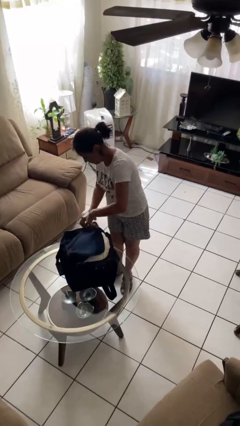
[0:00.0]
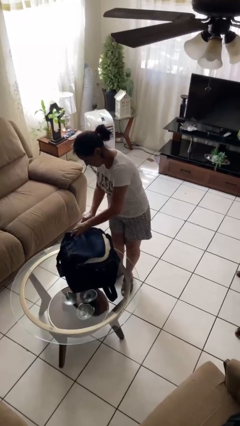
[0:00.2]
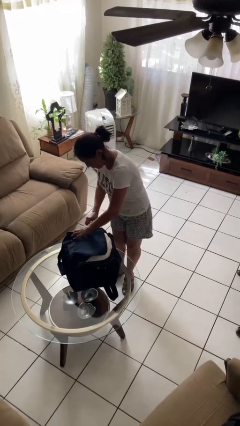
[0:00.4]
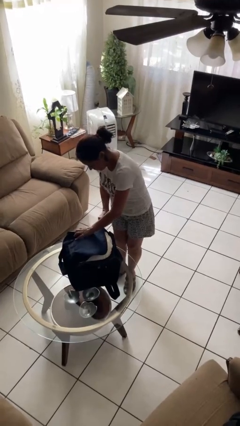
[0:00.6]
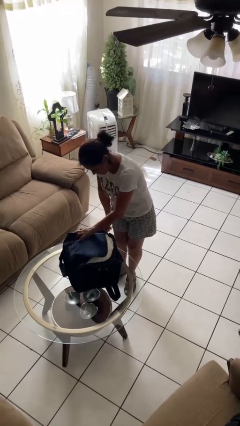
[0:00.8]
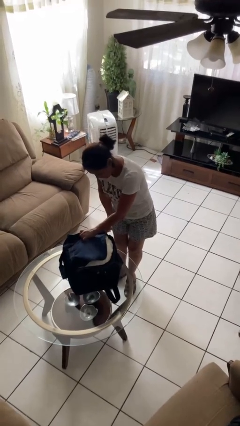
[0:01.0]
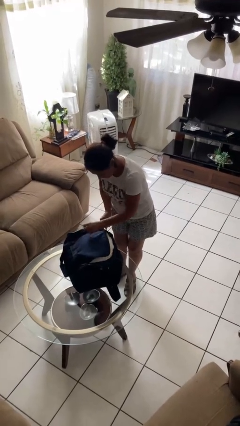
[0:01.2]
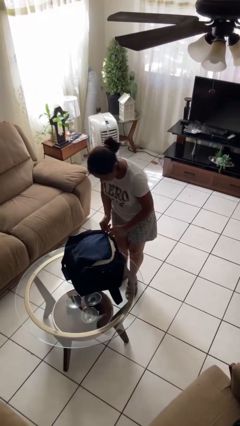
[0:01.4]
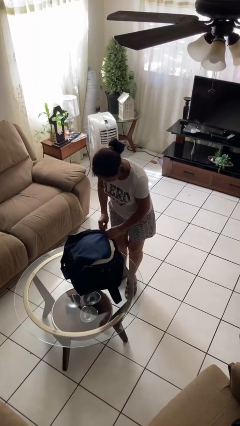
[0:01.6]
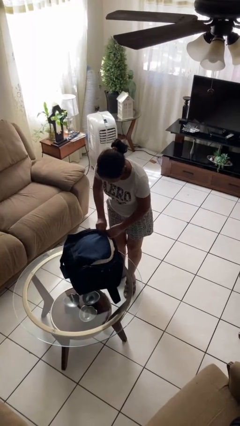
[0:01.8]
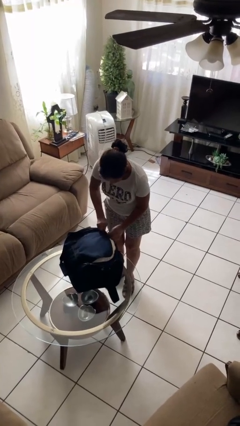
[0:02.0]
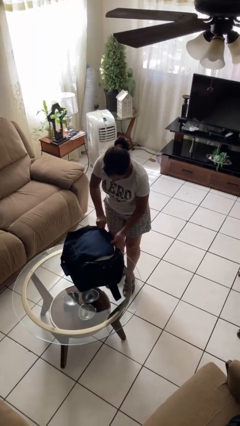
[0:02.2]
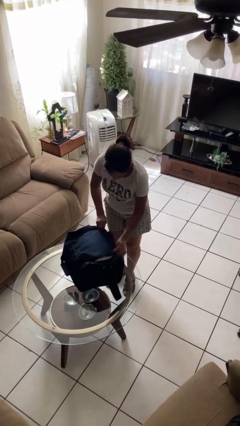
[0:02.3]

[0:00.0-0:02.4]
person closes suitcase

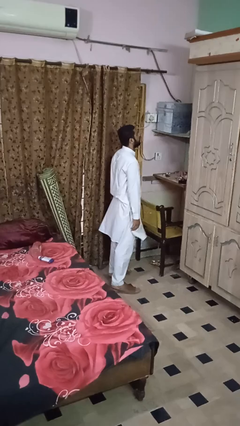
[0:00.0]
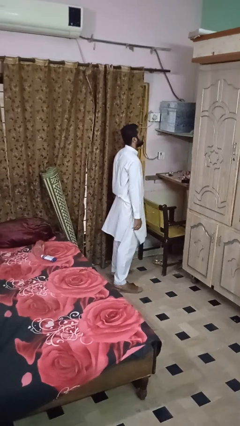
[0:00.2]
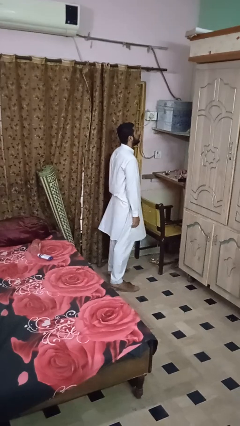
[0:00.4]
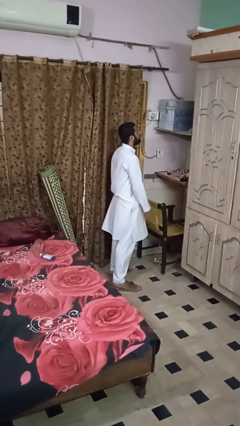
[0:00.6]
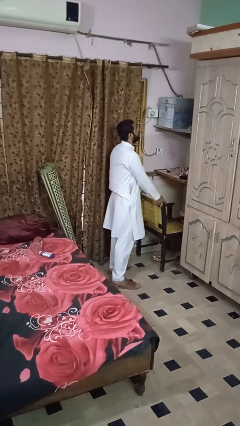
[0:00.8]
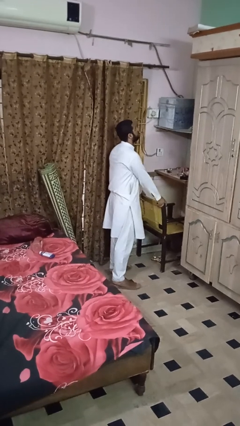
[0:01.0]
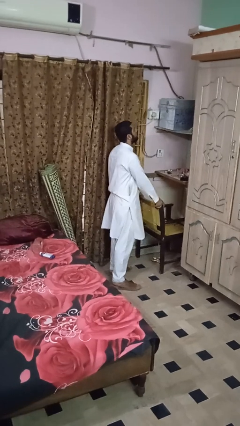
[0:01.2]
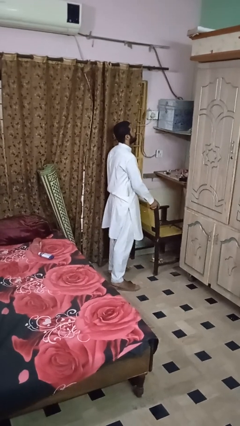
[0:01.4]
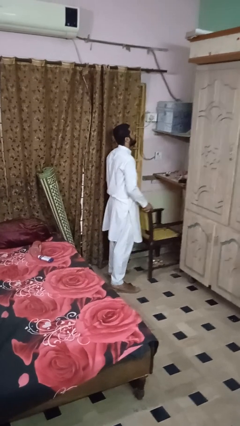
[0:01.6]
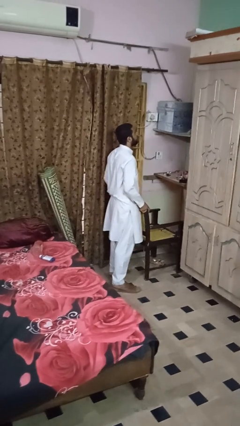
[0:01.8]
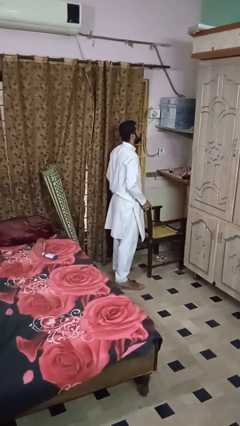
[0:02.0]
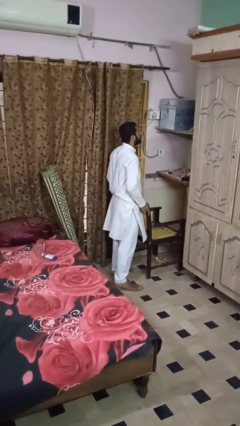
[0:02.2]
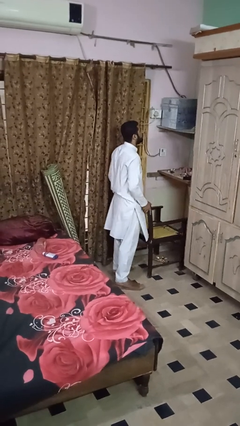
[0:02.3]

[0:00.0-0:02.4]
person pulls out chair

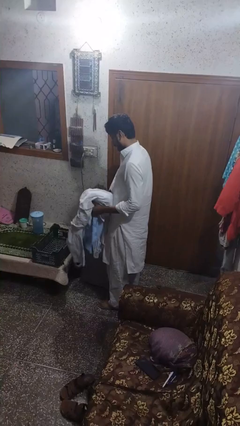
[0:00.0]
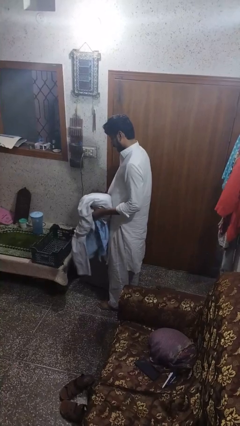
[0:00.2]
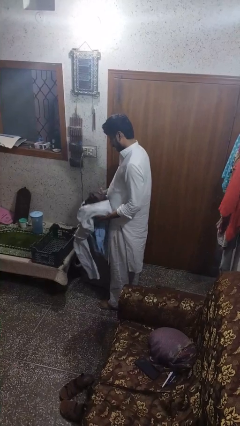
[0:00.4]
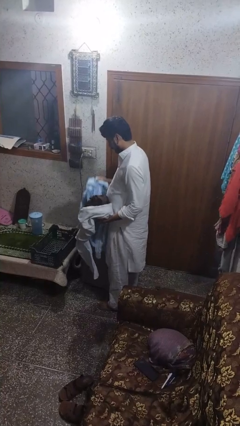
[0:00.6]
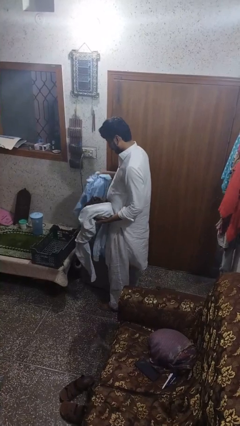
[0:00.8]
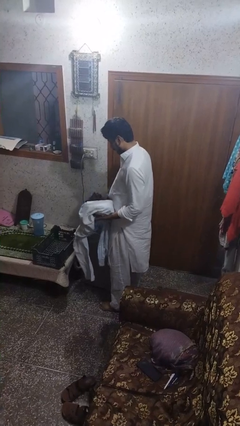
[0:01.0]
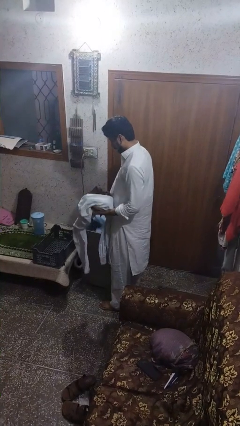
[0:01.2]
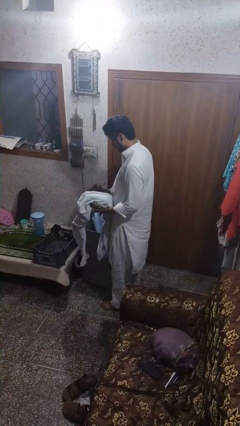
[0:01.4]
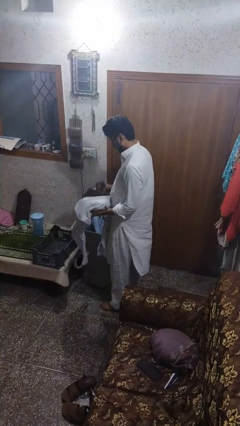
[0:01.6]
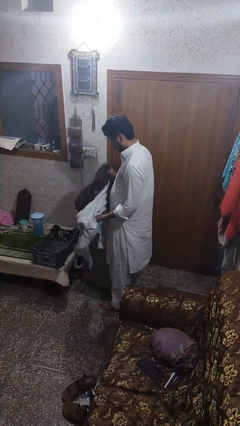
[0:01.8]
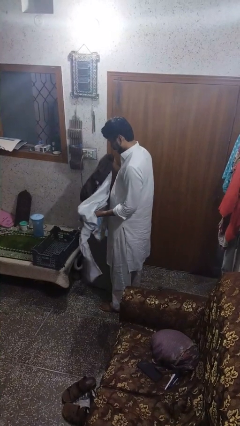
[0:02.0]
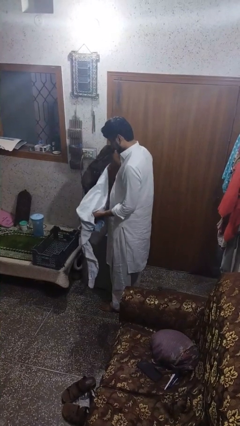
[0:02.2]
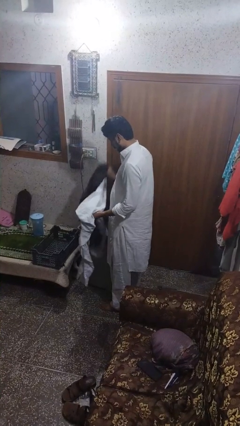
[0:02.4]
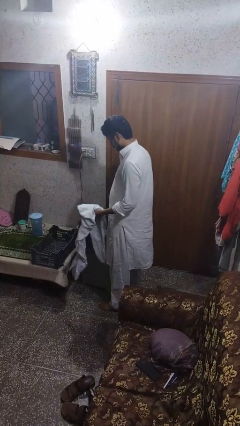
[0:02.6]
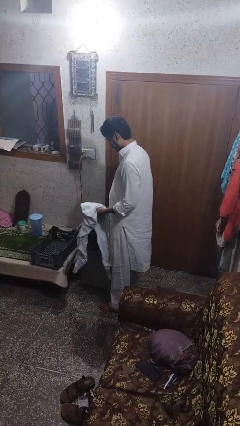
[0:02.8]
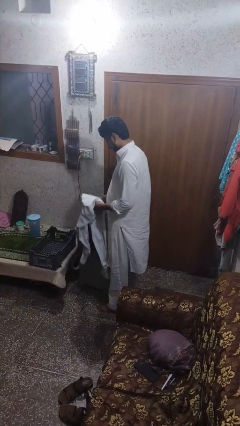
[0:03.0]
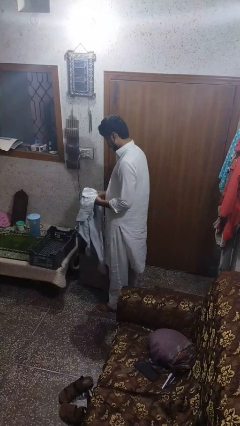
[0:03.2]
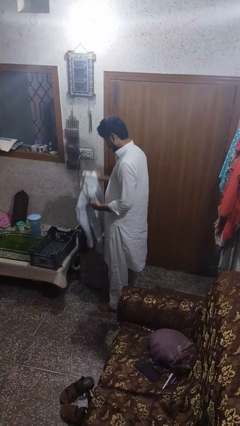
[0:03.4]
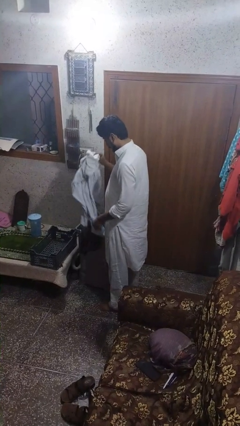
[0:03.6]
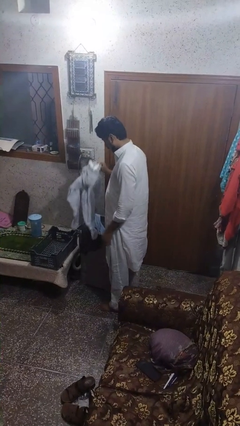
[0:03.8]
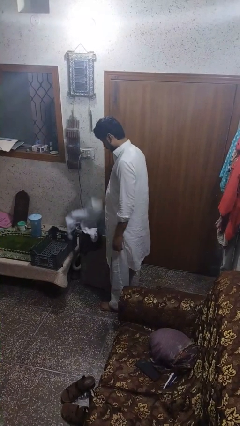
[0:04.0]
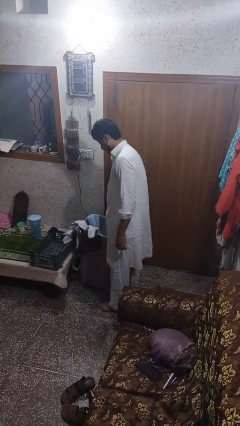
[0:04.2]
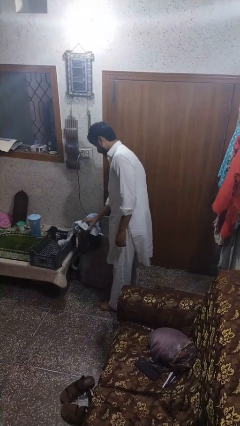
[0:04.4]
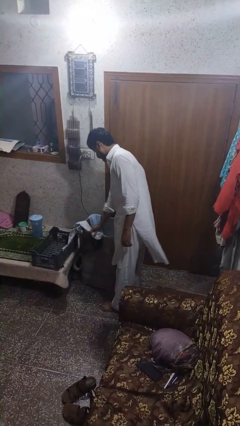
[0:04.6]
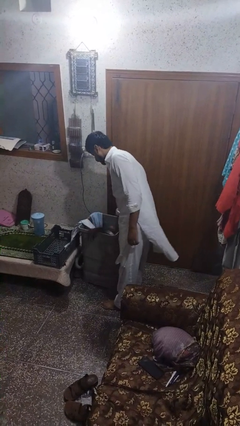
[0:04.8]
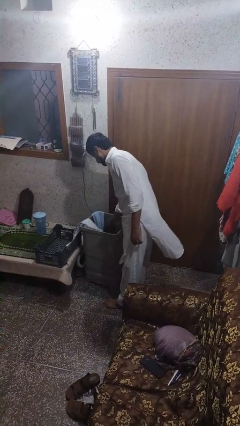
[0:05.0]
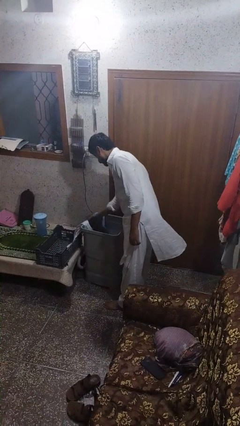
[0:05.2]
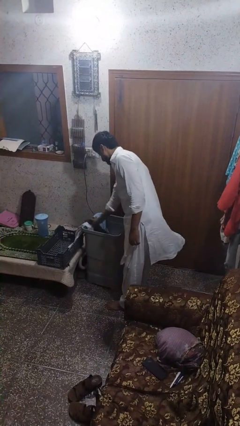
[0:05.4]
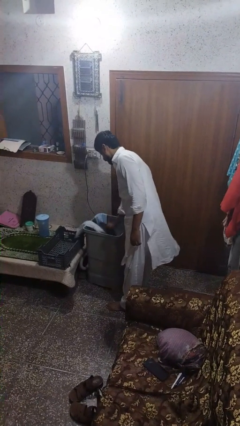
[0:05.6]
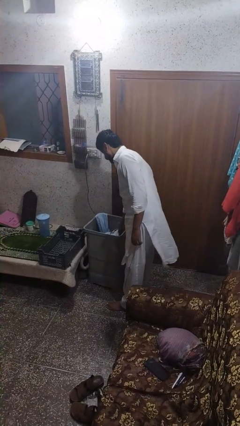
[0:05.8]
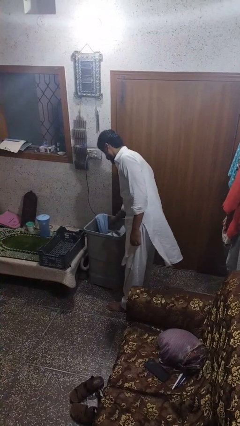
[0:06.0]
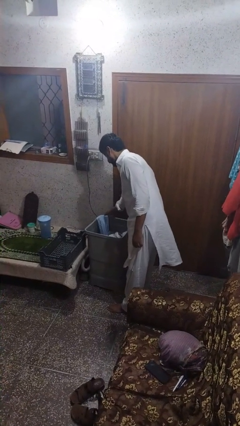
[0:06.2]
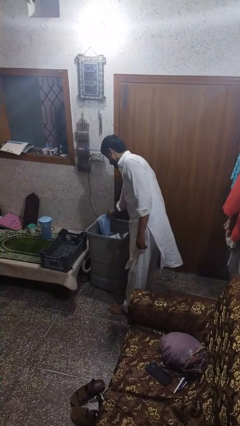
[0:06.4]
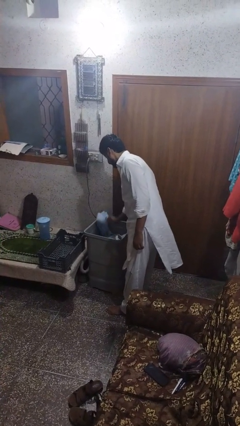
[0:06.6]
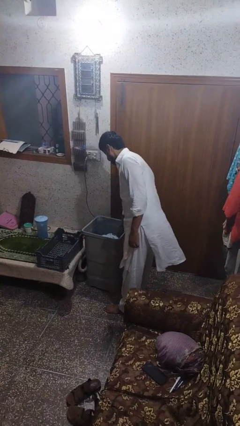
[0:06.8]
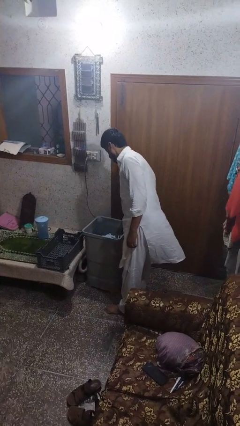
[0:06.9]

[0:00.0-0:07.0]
person loads dryer

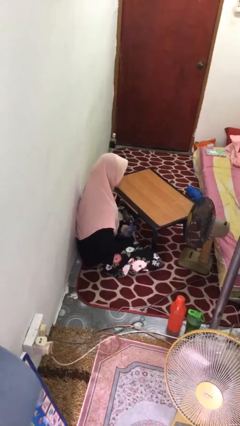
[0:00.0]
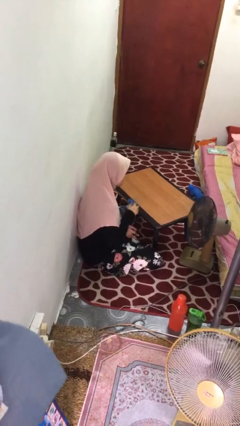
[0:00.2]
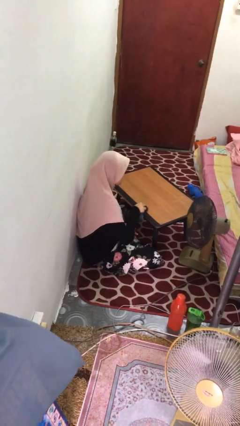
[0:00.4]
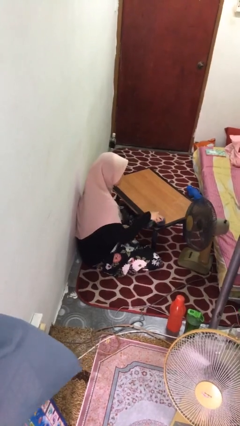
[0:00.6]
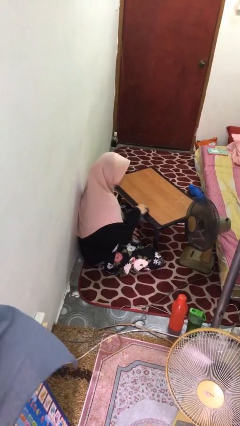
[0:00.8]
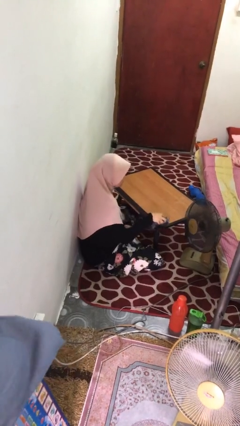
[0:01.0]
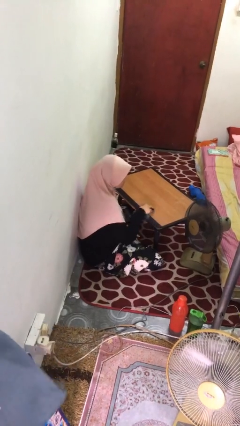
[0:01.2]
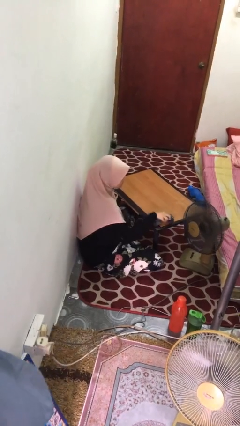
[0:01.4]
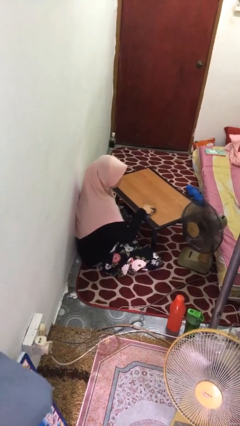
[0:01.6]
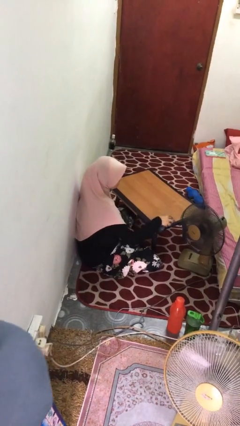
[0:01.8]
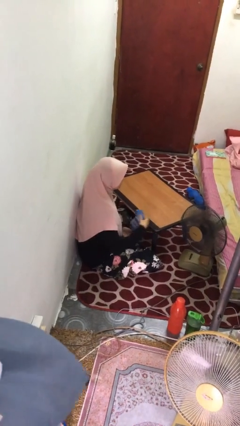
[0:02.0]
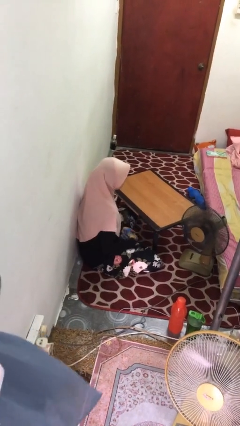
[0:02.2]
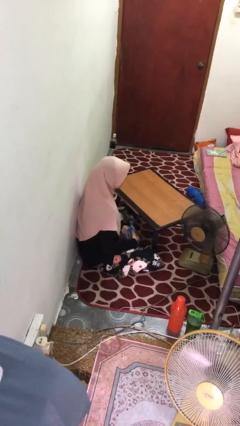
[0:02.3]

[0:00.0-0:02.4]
person cleans table with rag

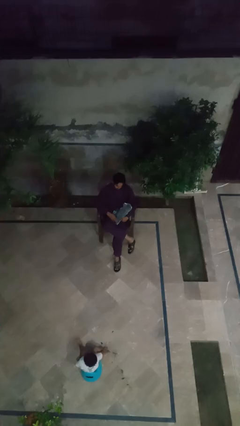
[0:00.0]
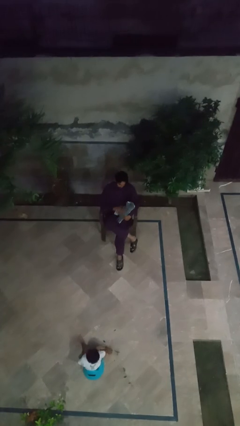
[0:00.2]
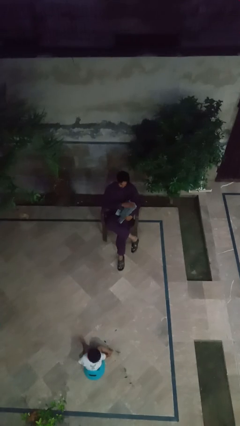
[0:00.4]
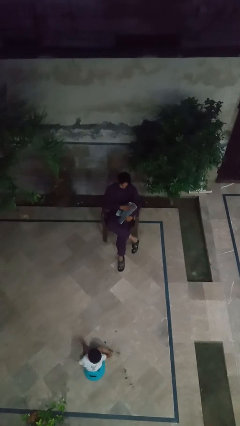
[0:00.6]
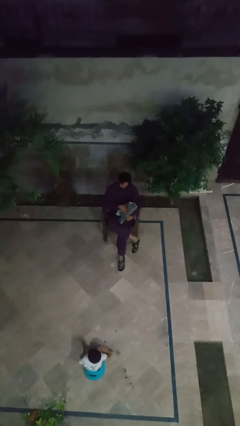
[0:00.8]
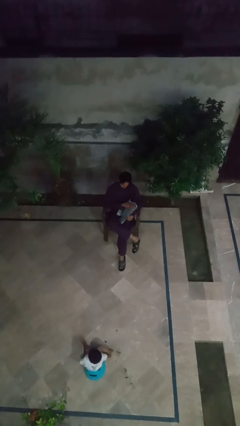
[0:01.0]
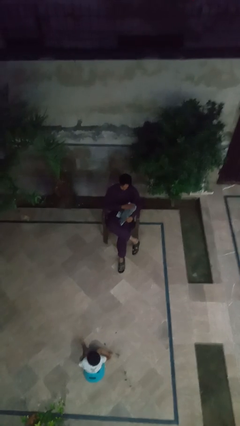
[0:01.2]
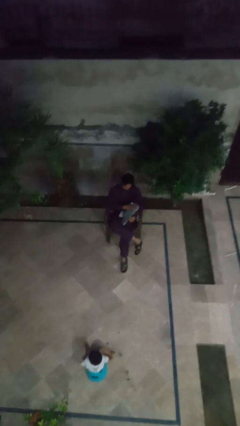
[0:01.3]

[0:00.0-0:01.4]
person pets cat

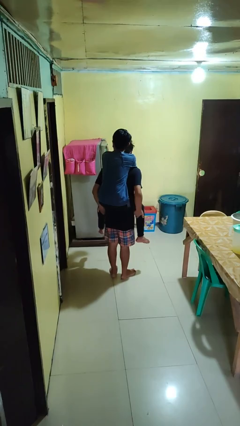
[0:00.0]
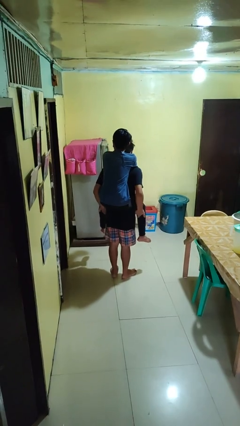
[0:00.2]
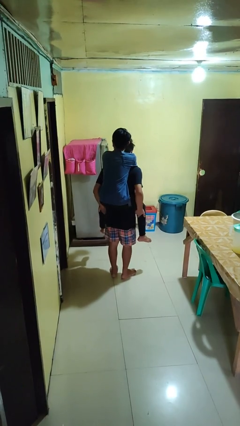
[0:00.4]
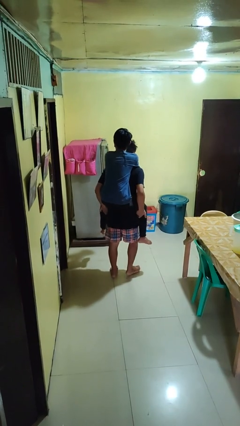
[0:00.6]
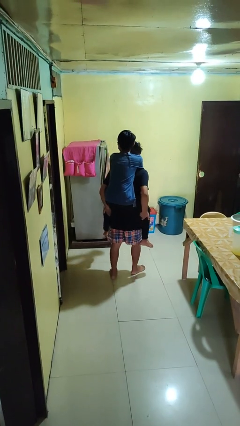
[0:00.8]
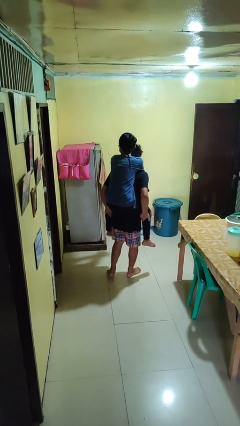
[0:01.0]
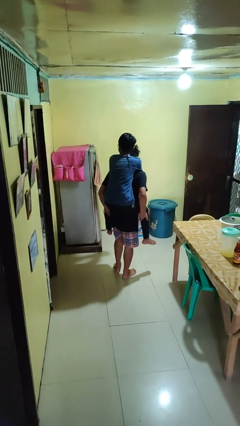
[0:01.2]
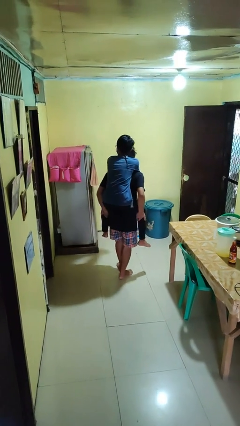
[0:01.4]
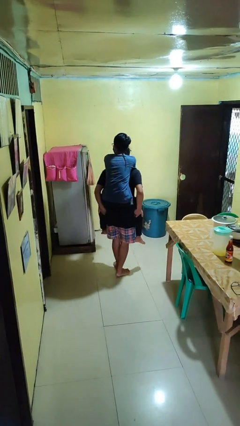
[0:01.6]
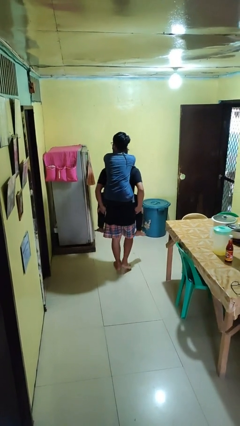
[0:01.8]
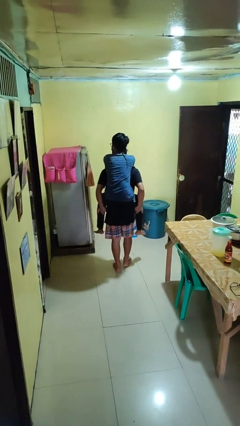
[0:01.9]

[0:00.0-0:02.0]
person carries person on back
